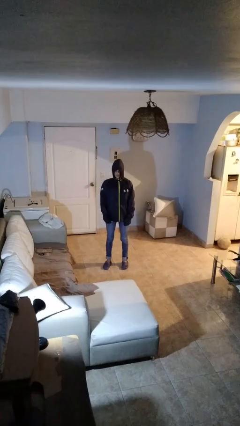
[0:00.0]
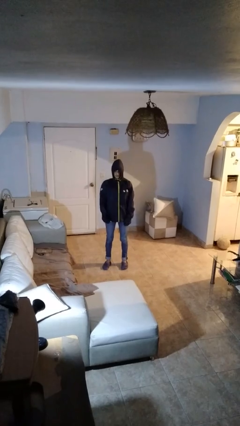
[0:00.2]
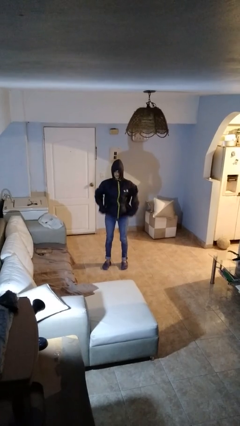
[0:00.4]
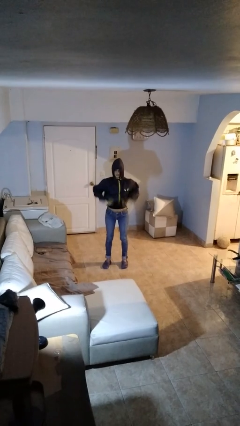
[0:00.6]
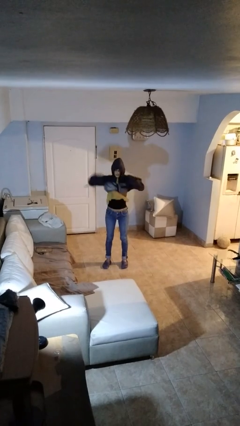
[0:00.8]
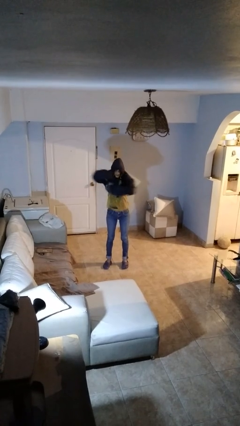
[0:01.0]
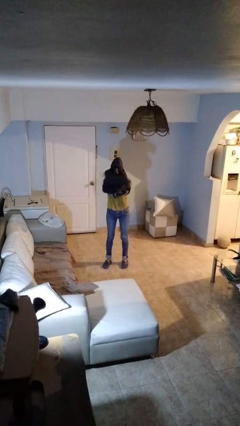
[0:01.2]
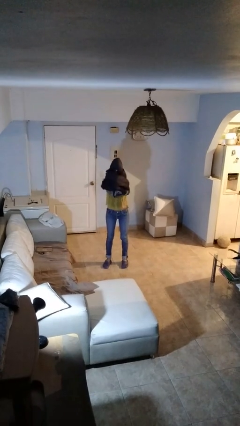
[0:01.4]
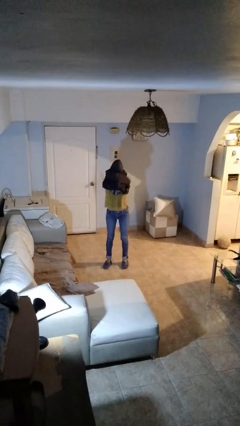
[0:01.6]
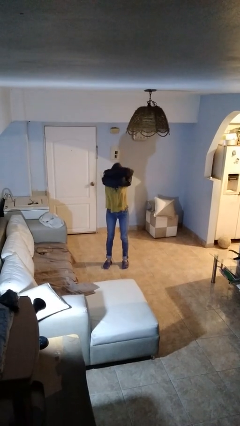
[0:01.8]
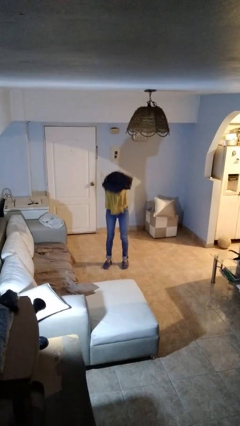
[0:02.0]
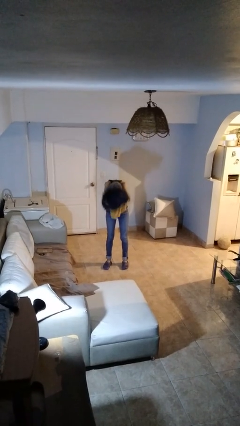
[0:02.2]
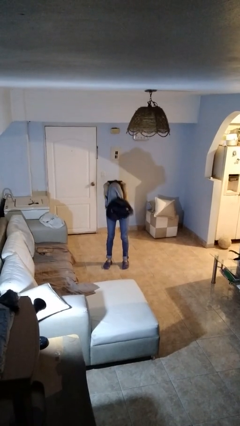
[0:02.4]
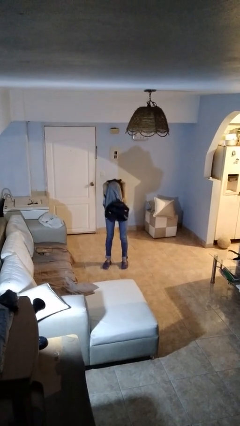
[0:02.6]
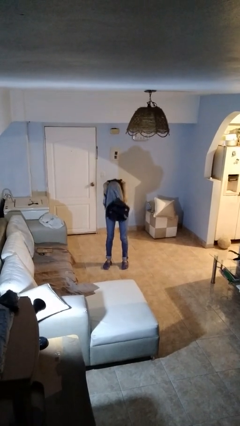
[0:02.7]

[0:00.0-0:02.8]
person takes off hoodie

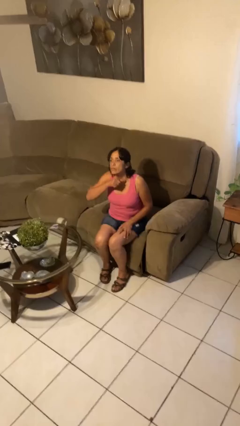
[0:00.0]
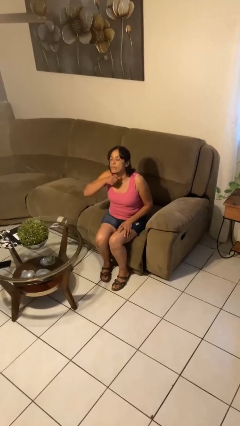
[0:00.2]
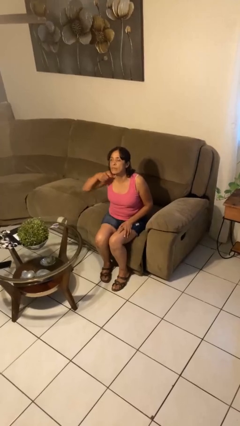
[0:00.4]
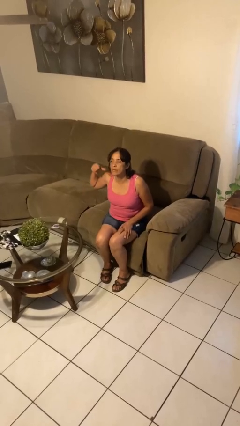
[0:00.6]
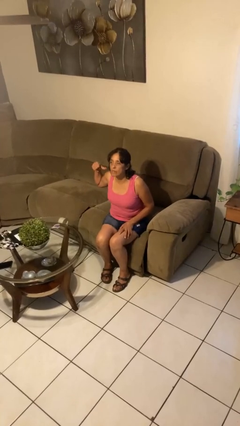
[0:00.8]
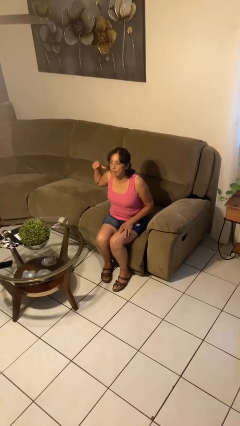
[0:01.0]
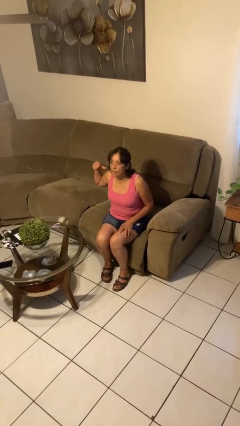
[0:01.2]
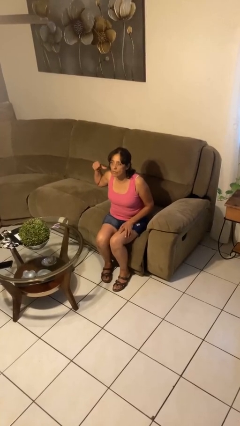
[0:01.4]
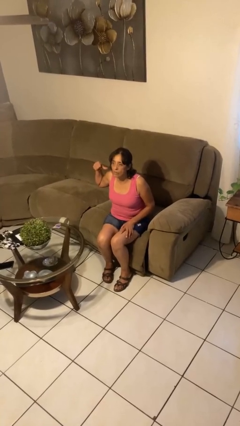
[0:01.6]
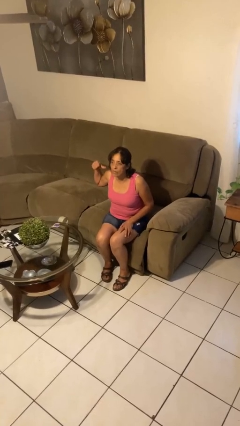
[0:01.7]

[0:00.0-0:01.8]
person gestures cut

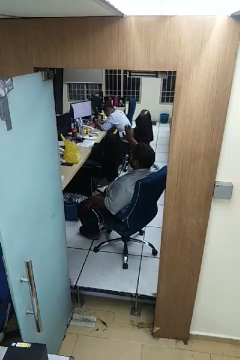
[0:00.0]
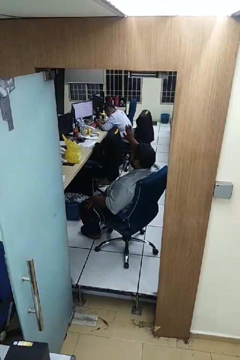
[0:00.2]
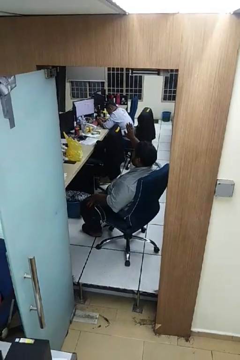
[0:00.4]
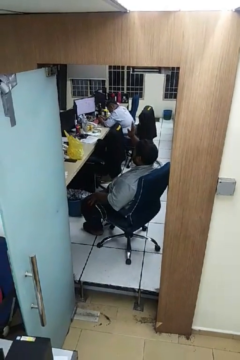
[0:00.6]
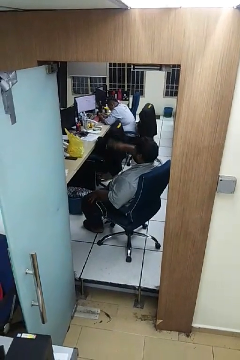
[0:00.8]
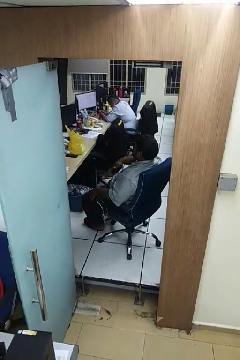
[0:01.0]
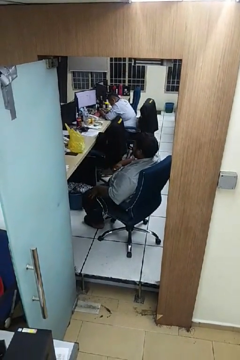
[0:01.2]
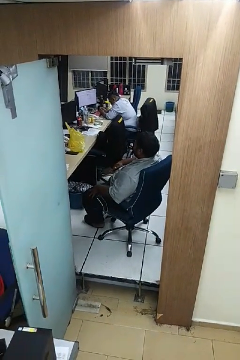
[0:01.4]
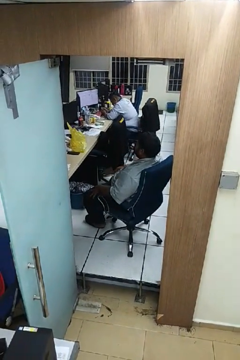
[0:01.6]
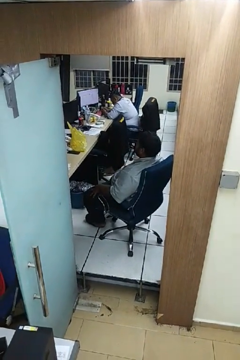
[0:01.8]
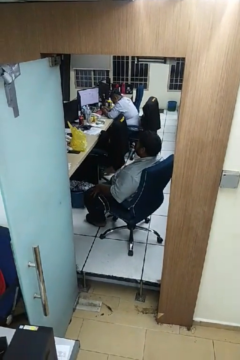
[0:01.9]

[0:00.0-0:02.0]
person gestures swipe down

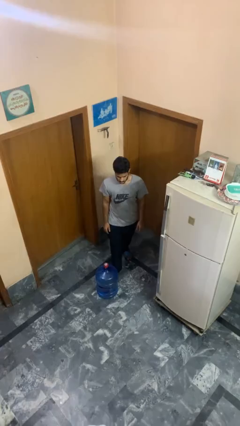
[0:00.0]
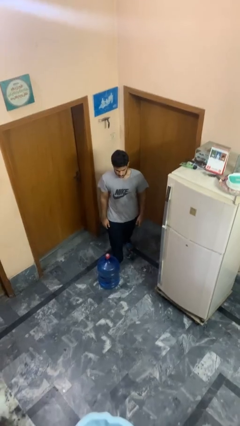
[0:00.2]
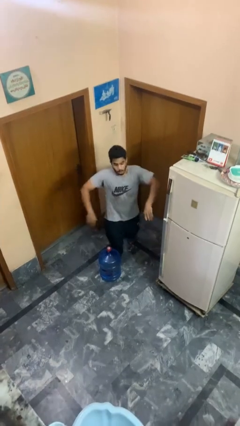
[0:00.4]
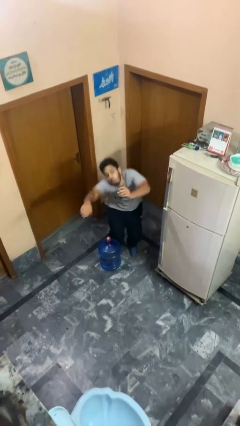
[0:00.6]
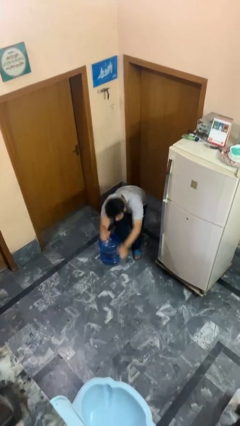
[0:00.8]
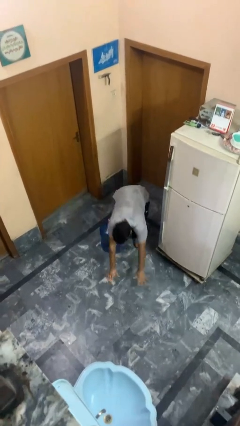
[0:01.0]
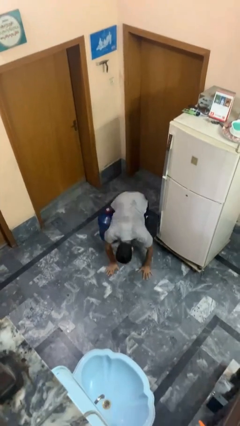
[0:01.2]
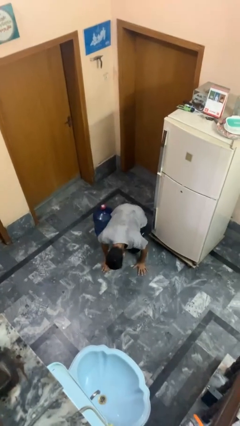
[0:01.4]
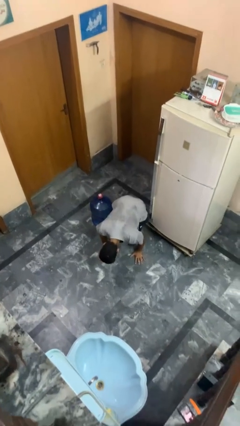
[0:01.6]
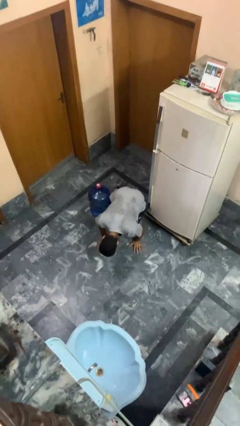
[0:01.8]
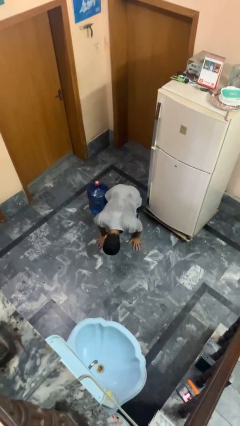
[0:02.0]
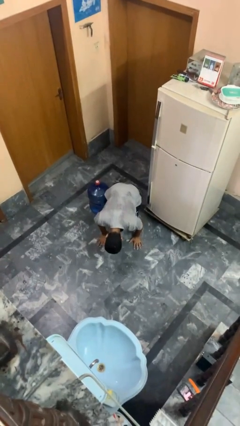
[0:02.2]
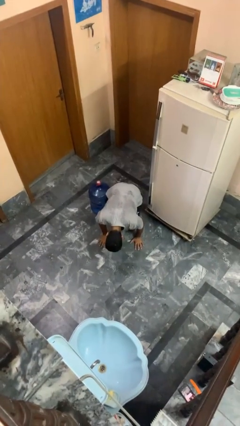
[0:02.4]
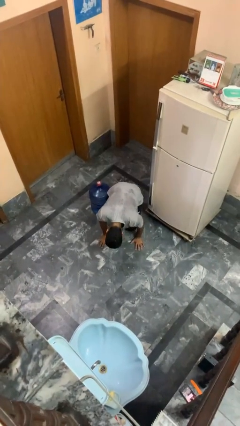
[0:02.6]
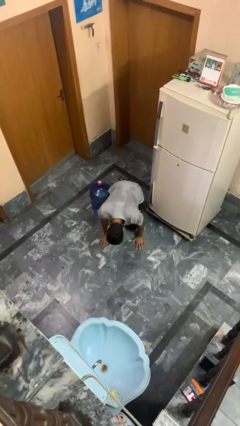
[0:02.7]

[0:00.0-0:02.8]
person trips on object on floor

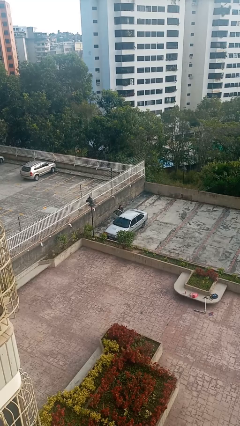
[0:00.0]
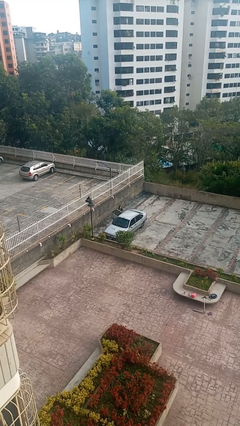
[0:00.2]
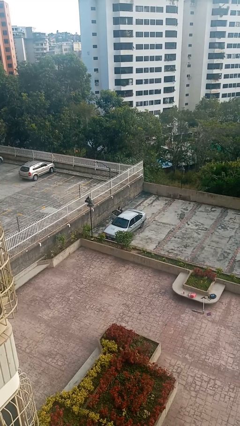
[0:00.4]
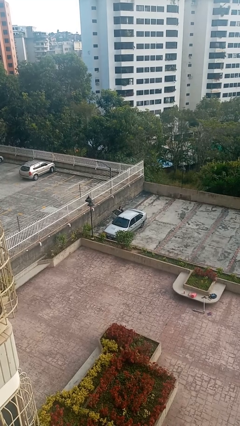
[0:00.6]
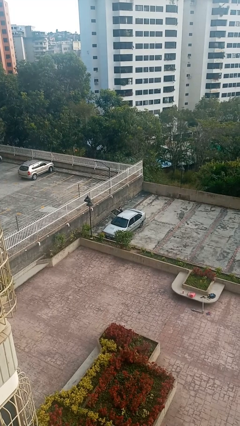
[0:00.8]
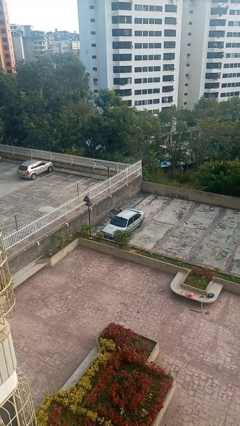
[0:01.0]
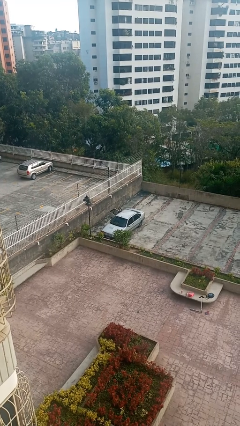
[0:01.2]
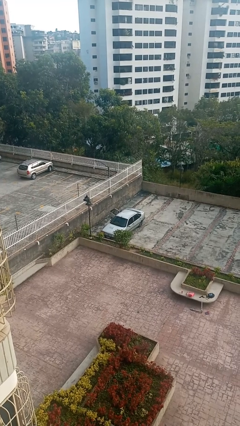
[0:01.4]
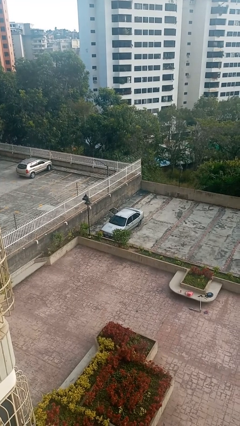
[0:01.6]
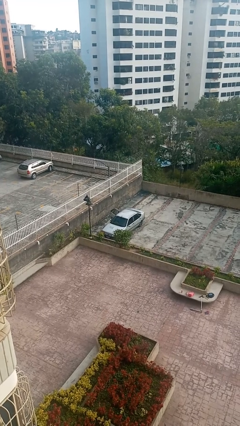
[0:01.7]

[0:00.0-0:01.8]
person enters car

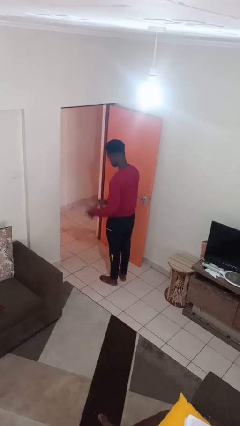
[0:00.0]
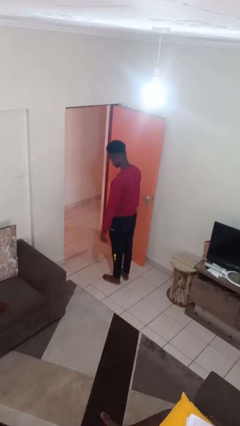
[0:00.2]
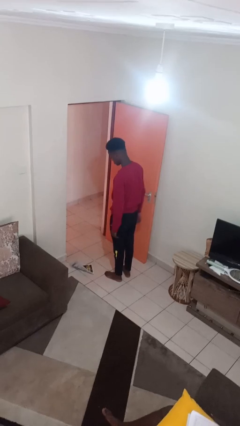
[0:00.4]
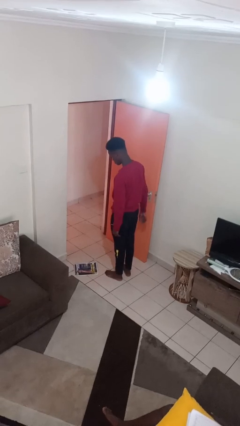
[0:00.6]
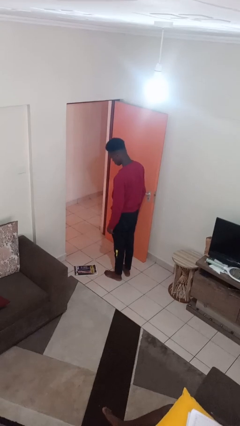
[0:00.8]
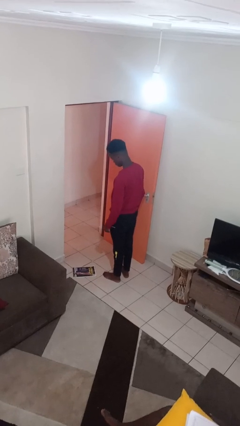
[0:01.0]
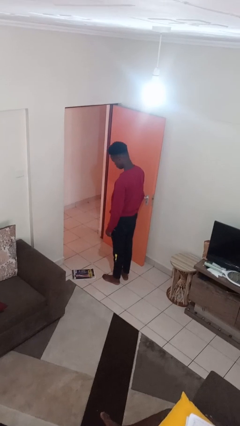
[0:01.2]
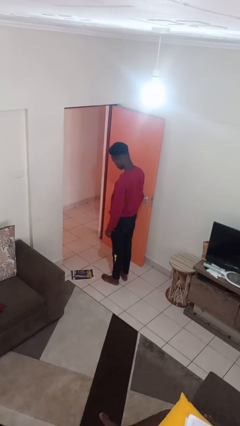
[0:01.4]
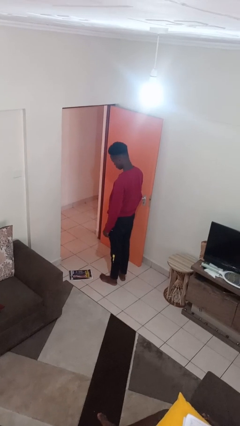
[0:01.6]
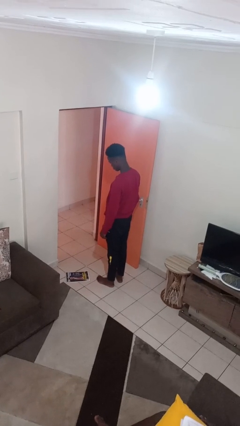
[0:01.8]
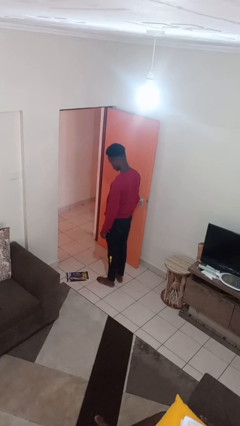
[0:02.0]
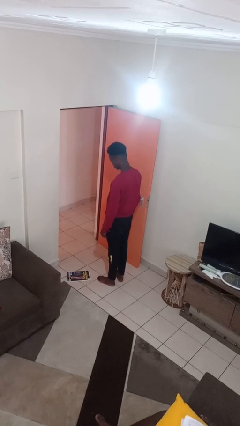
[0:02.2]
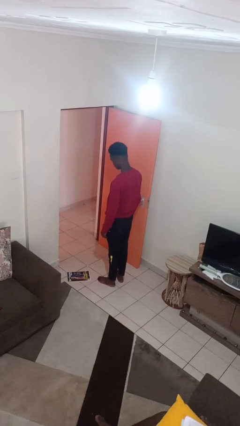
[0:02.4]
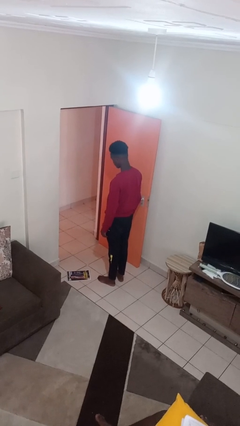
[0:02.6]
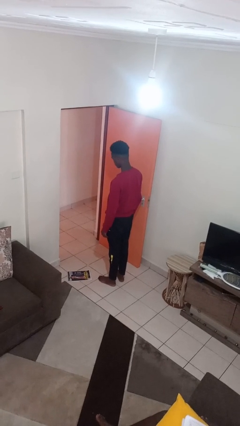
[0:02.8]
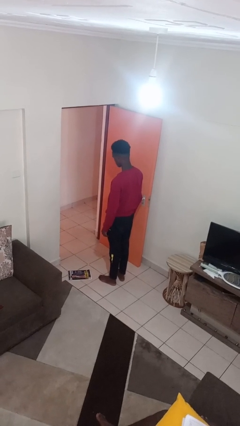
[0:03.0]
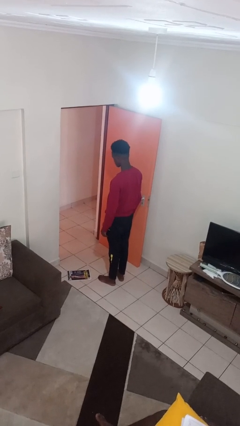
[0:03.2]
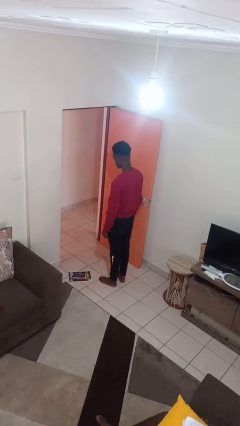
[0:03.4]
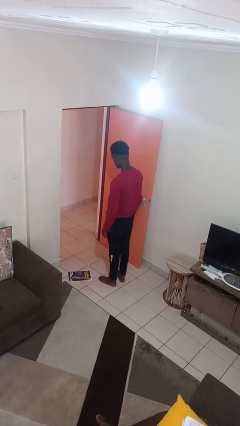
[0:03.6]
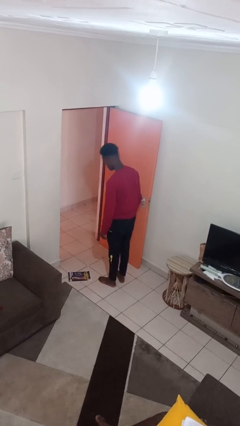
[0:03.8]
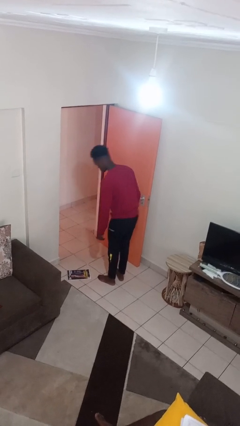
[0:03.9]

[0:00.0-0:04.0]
person drops object

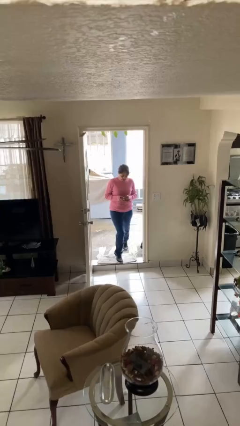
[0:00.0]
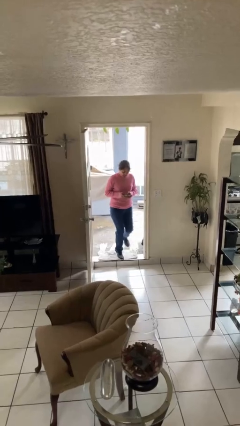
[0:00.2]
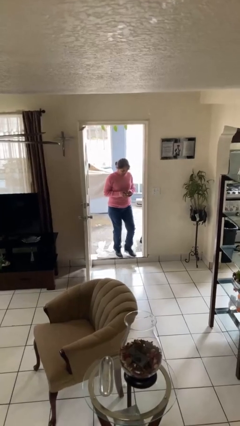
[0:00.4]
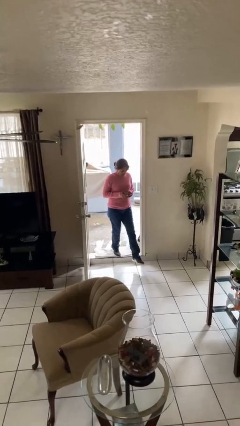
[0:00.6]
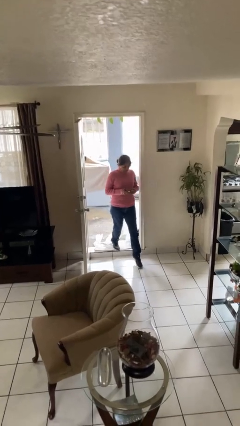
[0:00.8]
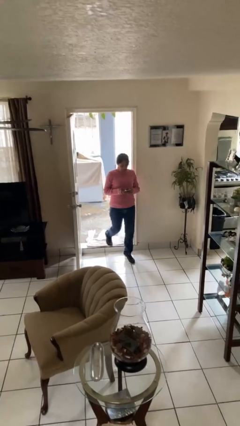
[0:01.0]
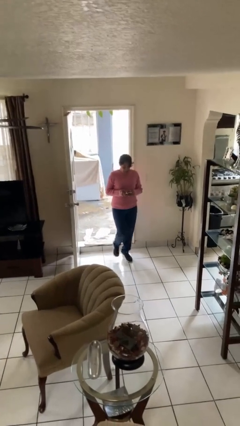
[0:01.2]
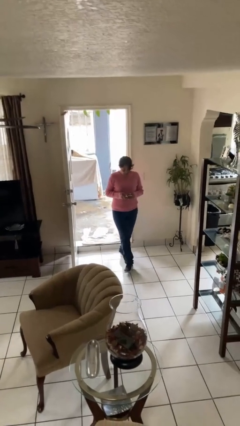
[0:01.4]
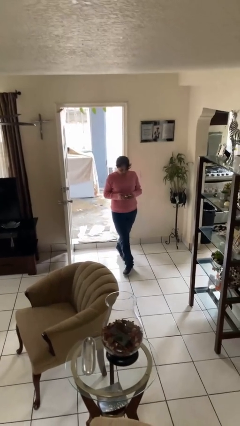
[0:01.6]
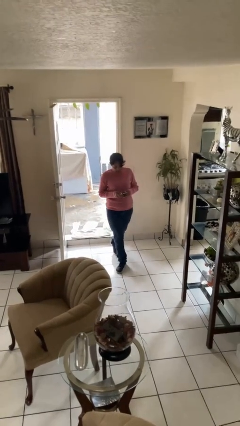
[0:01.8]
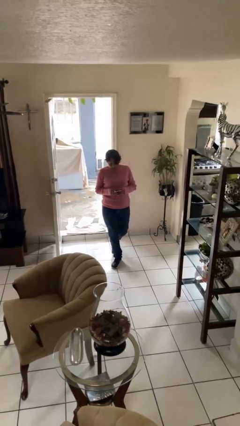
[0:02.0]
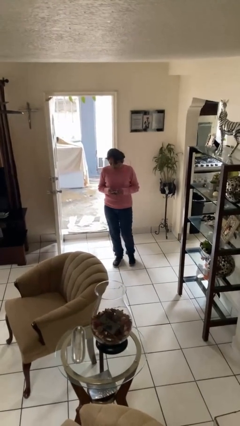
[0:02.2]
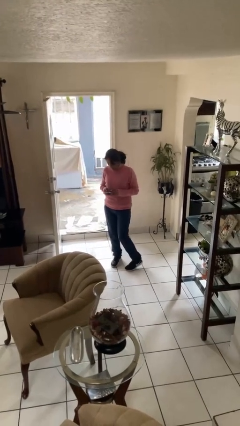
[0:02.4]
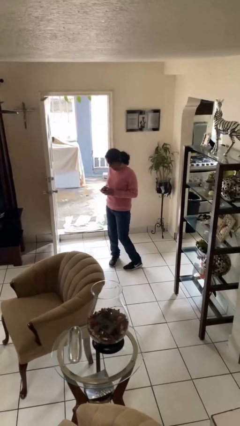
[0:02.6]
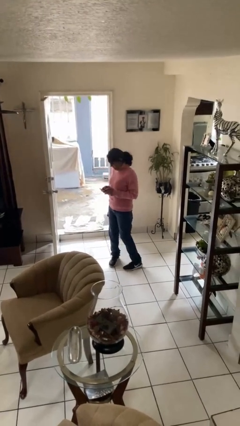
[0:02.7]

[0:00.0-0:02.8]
person enters scene through structure
